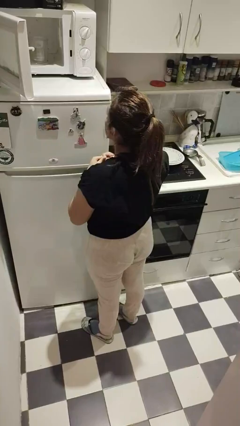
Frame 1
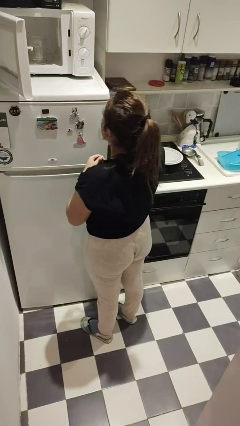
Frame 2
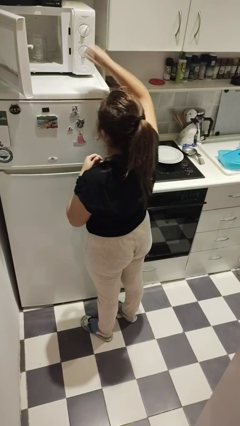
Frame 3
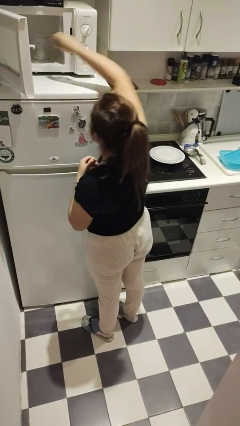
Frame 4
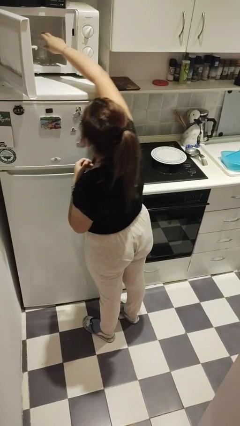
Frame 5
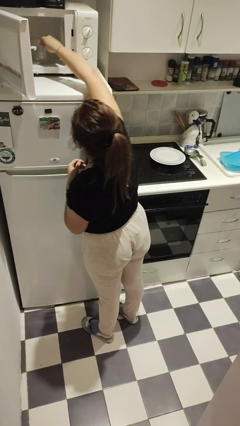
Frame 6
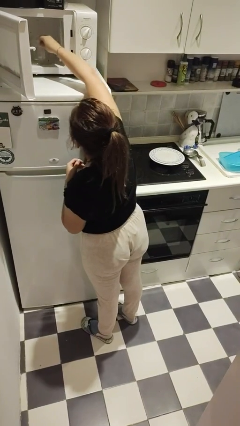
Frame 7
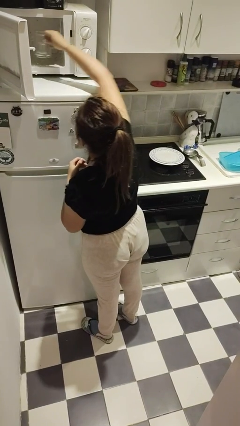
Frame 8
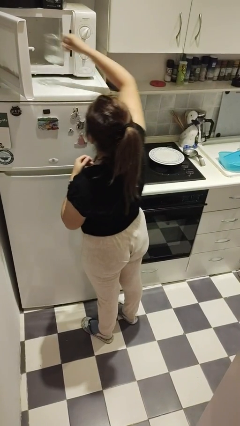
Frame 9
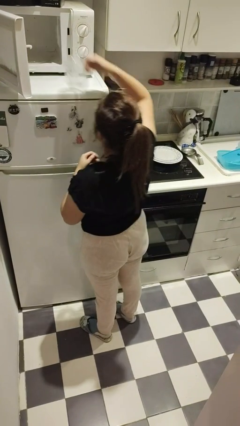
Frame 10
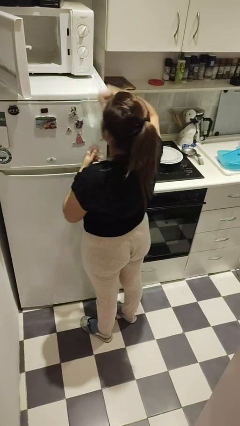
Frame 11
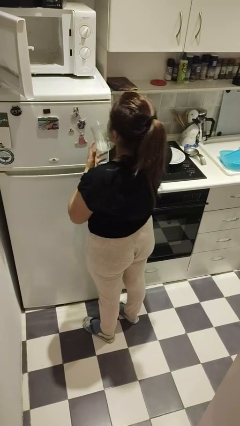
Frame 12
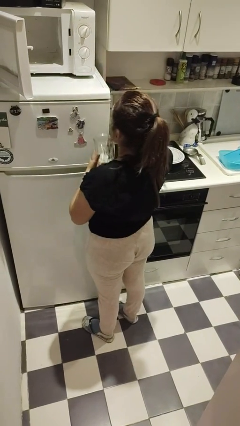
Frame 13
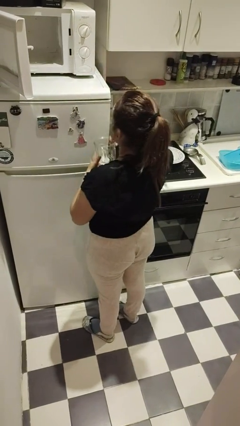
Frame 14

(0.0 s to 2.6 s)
person takes object from microwave

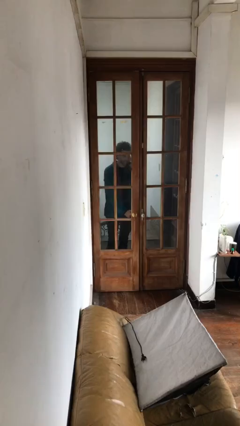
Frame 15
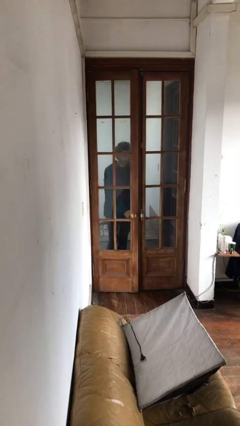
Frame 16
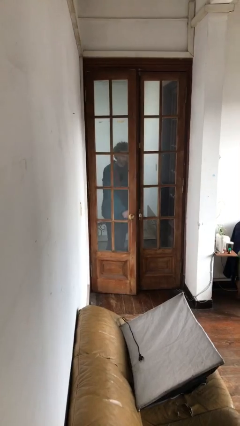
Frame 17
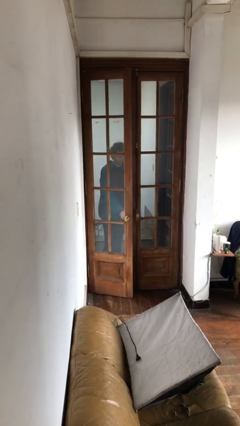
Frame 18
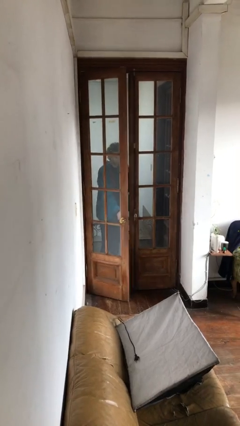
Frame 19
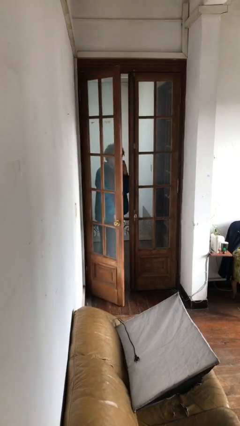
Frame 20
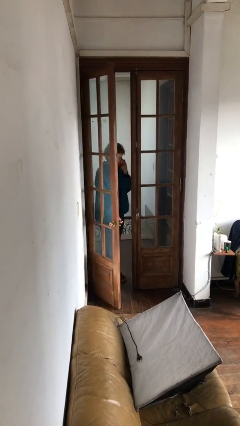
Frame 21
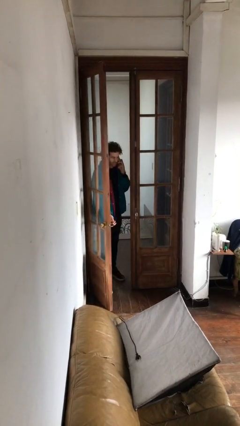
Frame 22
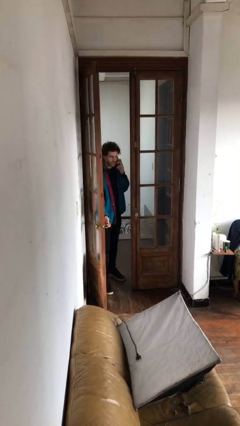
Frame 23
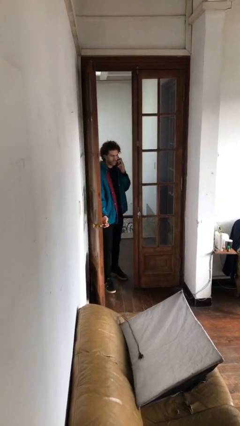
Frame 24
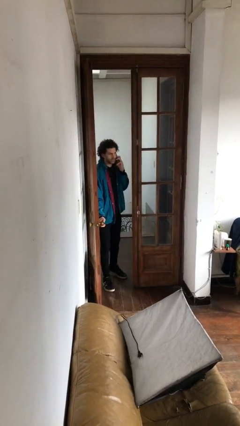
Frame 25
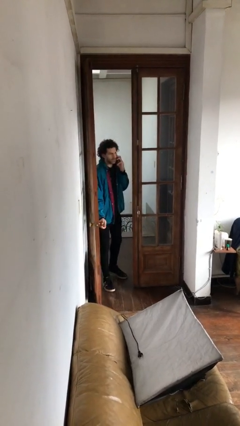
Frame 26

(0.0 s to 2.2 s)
person opens facility door

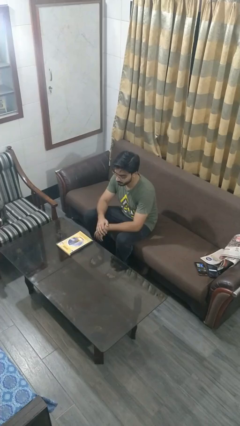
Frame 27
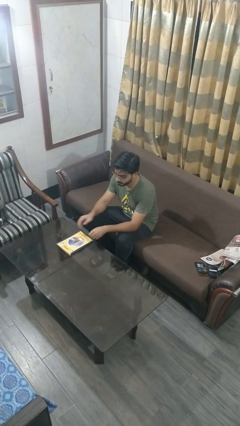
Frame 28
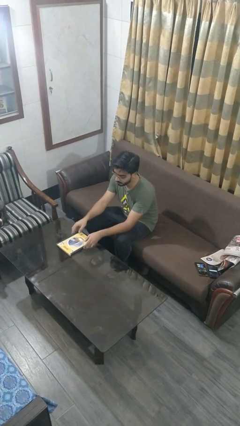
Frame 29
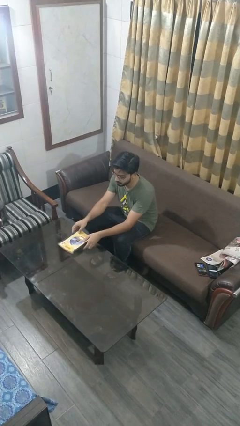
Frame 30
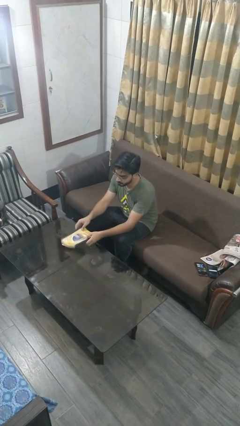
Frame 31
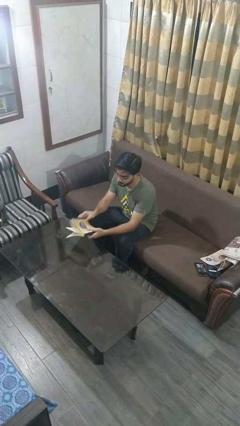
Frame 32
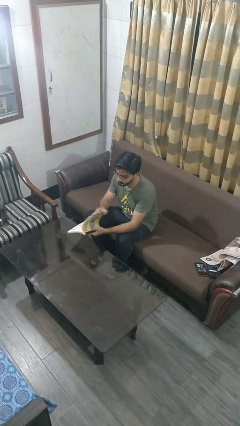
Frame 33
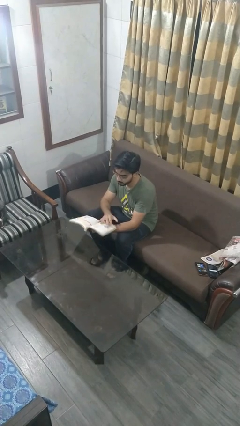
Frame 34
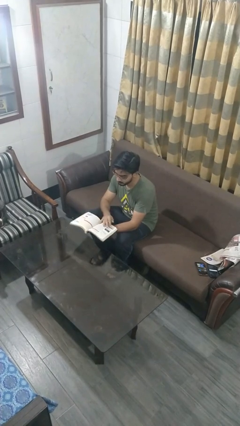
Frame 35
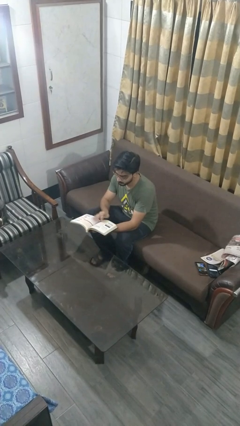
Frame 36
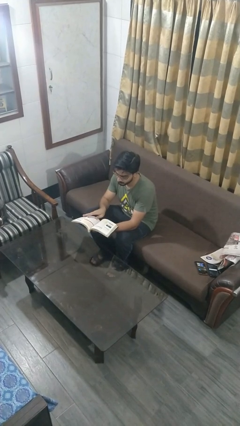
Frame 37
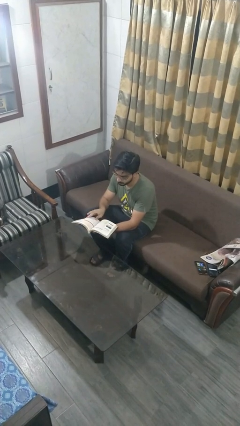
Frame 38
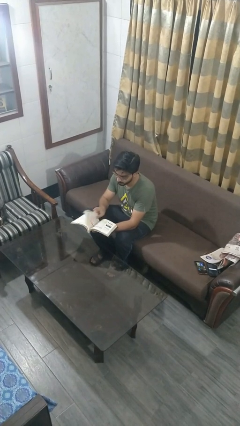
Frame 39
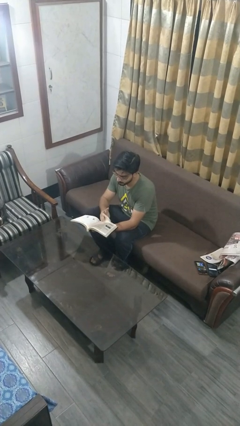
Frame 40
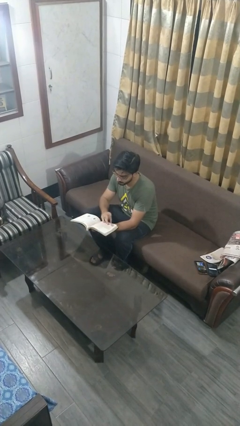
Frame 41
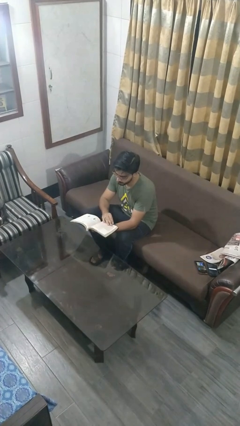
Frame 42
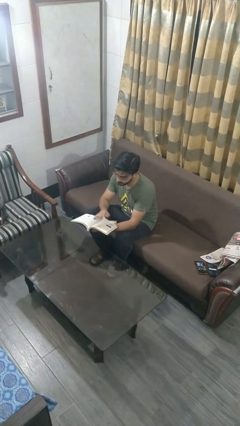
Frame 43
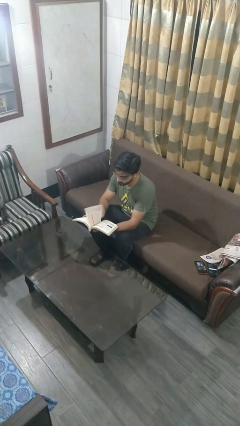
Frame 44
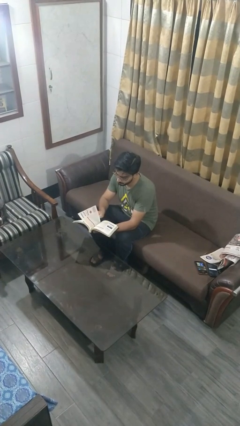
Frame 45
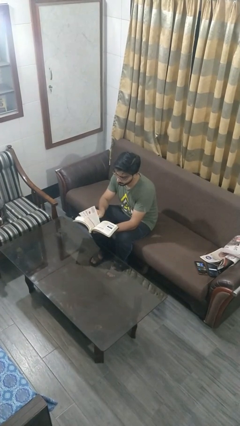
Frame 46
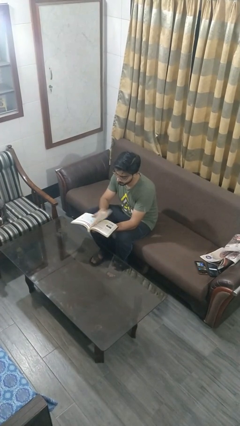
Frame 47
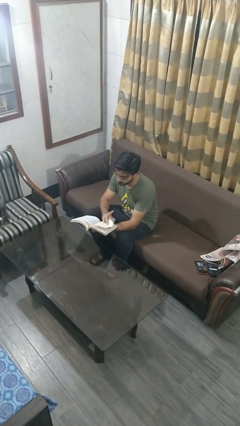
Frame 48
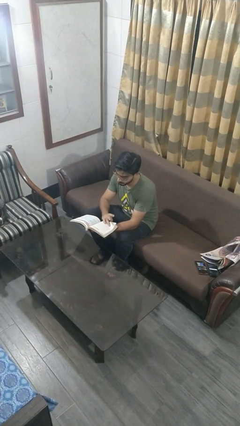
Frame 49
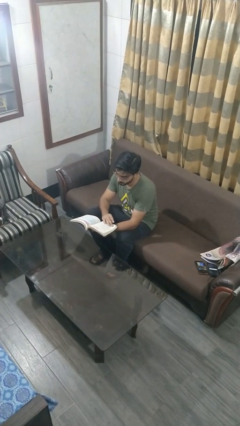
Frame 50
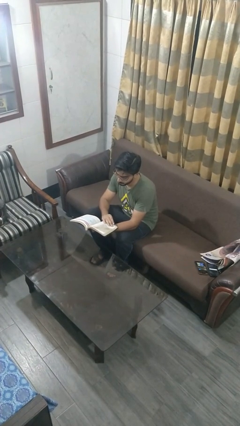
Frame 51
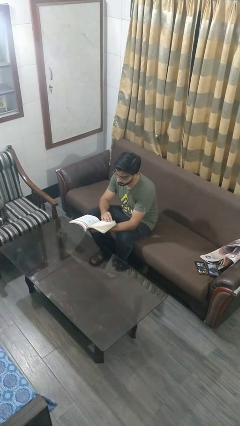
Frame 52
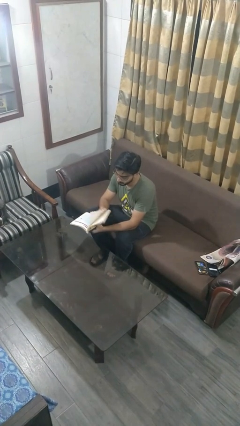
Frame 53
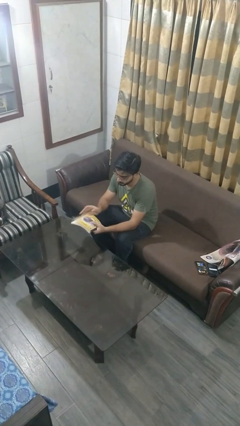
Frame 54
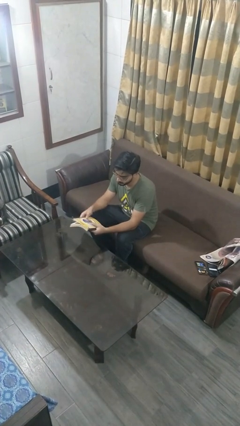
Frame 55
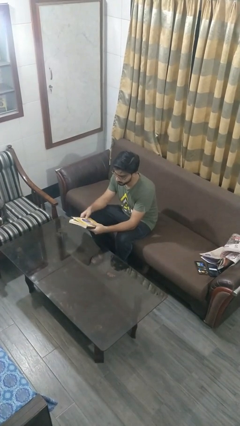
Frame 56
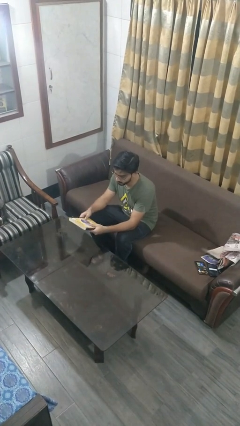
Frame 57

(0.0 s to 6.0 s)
person reads book

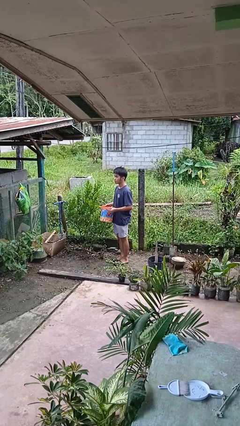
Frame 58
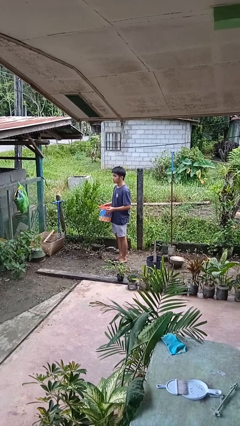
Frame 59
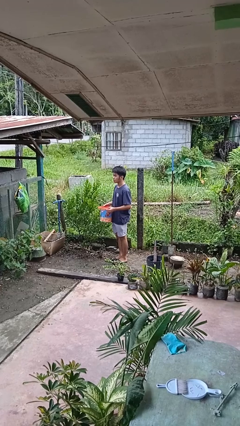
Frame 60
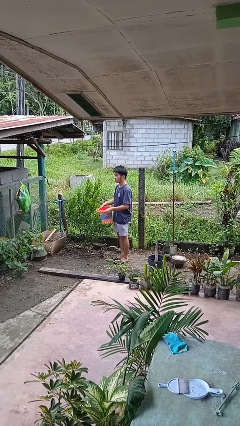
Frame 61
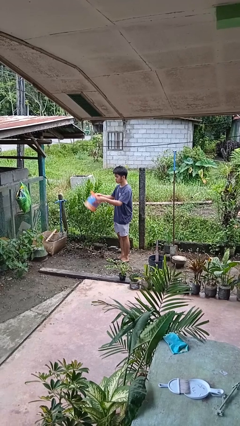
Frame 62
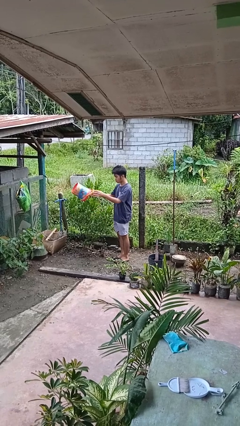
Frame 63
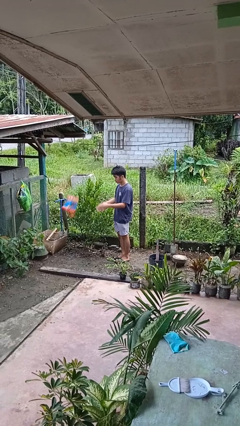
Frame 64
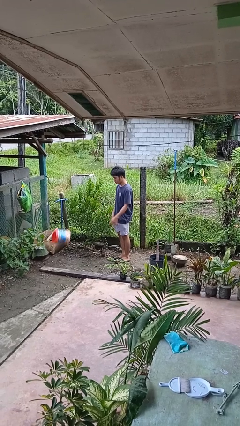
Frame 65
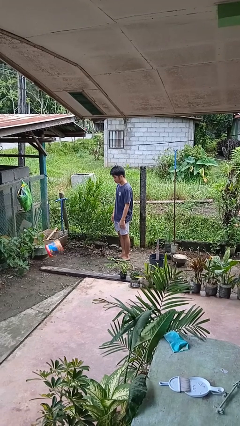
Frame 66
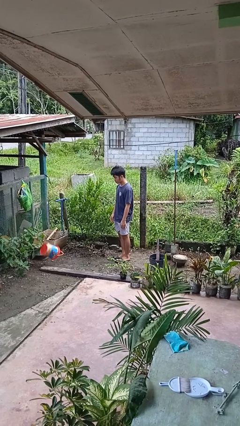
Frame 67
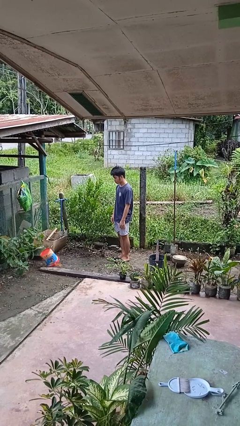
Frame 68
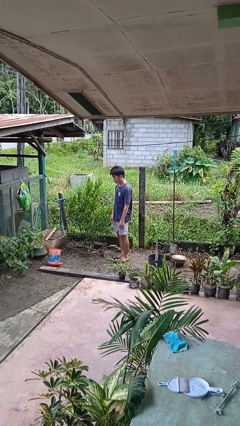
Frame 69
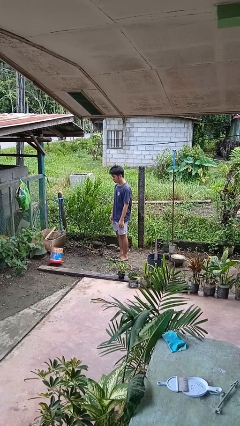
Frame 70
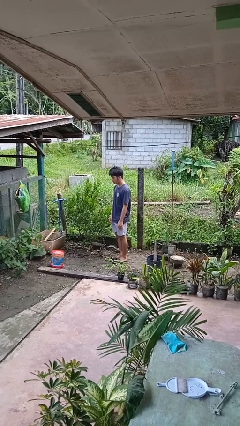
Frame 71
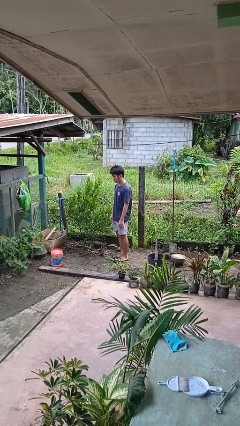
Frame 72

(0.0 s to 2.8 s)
person throws object into air

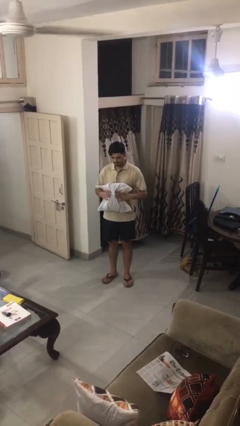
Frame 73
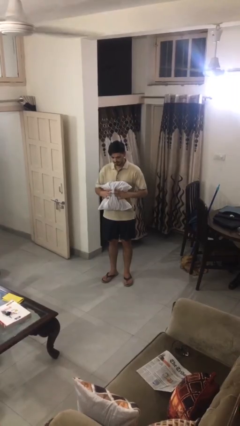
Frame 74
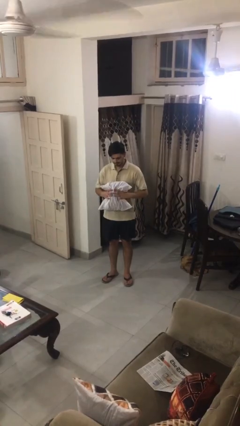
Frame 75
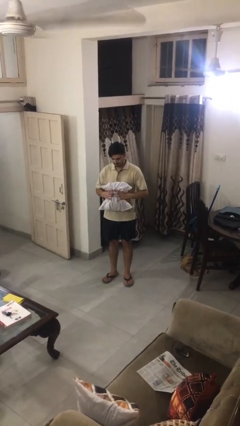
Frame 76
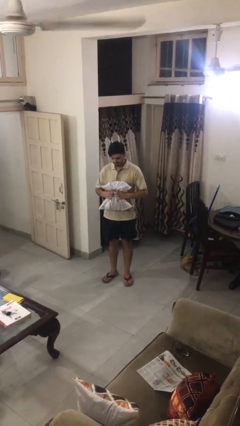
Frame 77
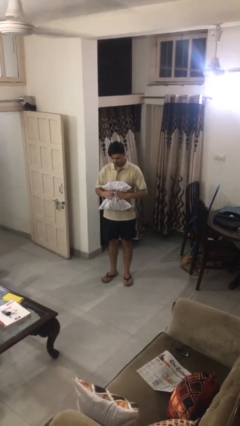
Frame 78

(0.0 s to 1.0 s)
person squeezes object

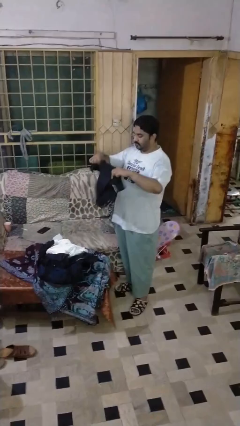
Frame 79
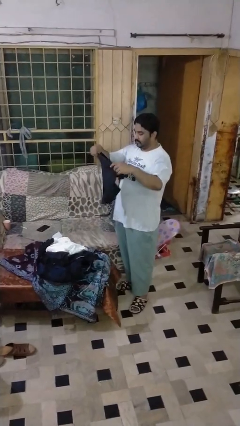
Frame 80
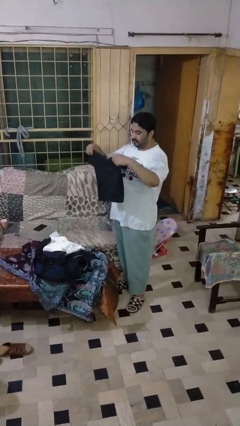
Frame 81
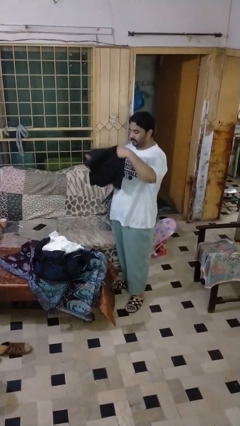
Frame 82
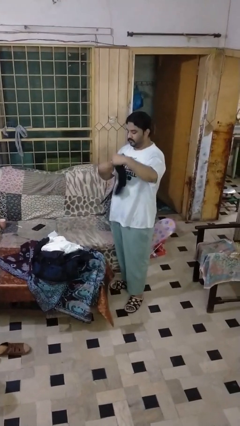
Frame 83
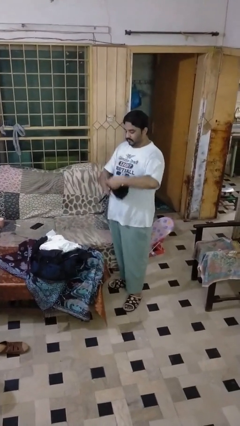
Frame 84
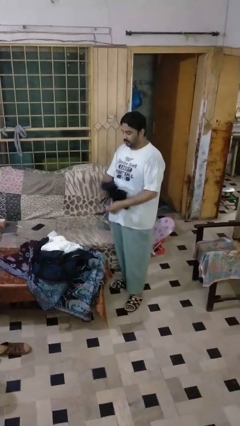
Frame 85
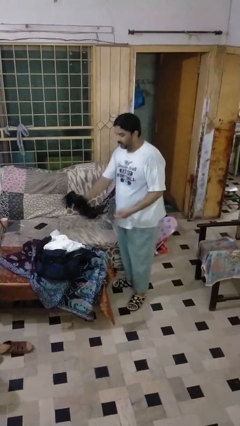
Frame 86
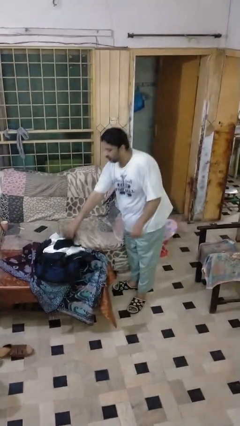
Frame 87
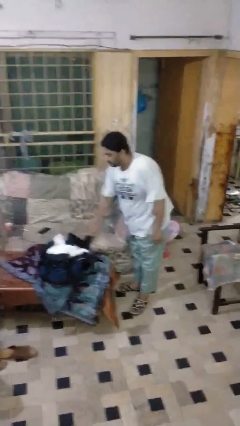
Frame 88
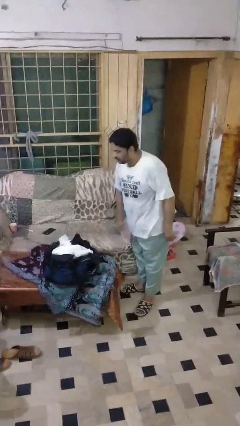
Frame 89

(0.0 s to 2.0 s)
person folds shirt

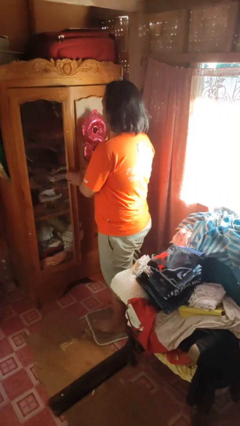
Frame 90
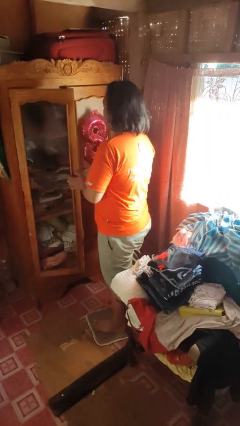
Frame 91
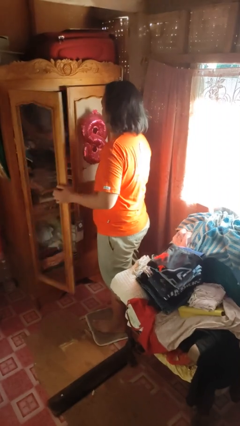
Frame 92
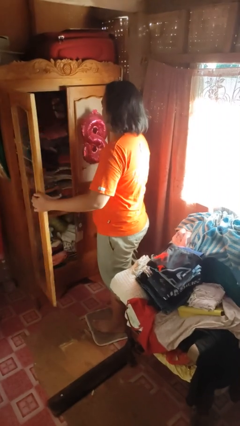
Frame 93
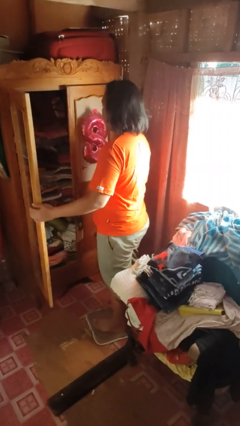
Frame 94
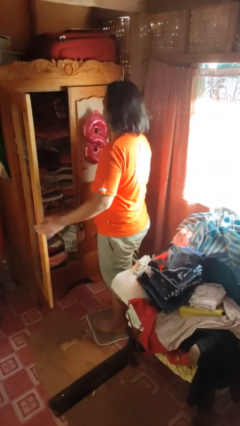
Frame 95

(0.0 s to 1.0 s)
person opens dresser drawer
